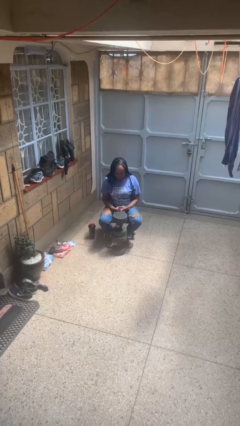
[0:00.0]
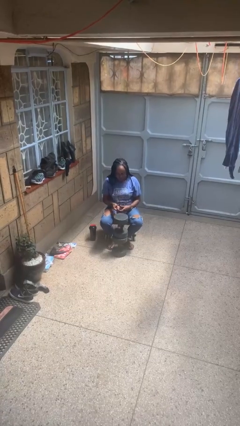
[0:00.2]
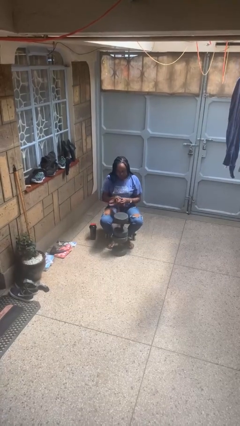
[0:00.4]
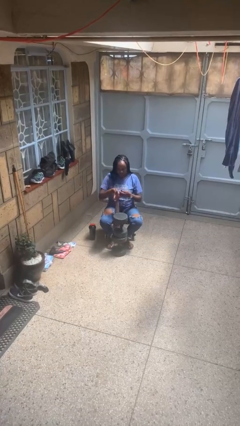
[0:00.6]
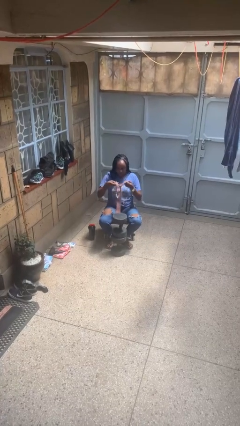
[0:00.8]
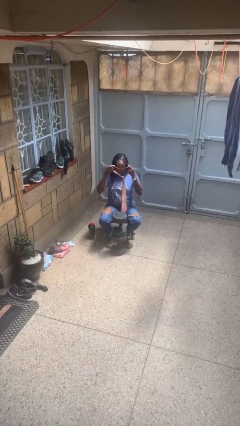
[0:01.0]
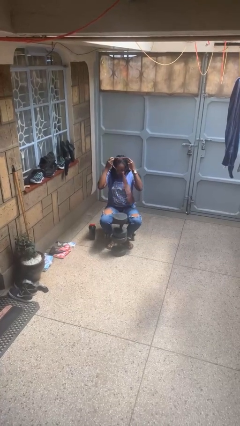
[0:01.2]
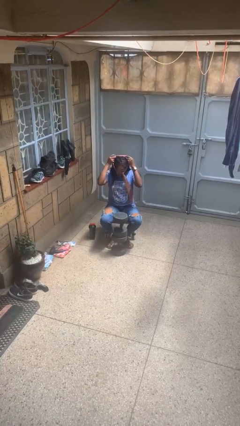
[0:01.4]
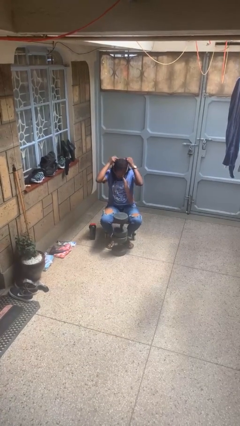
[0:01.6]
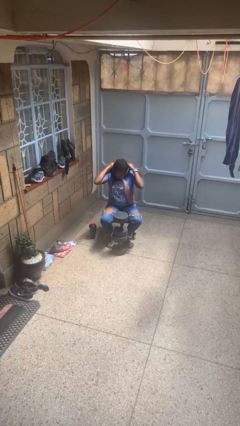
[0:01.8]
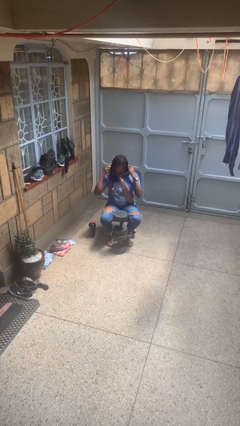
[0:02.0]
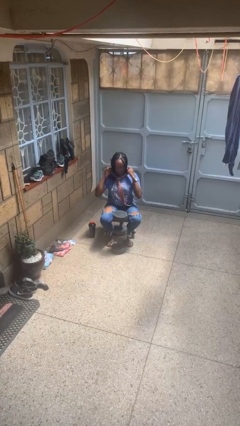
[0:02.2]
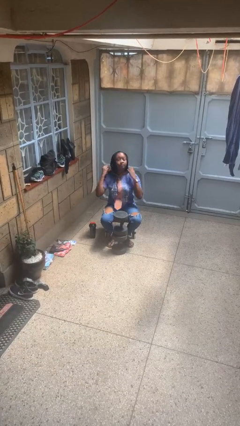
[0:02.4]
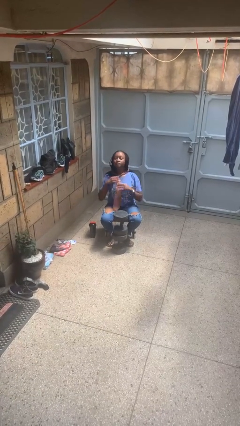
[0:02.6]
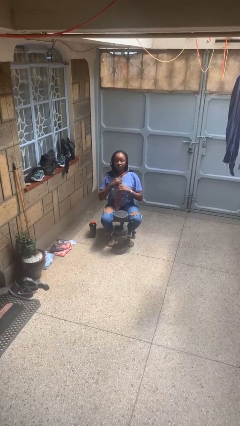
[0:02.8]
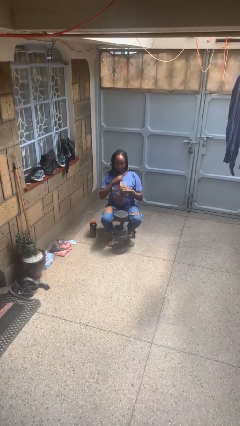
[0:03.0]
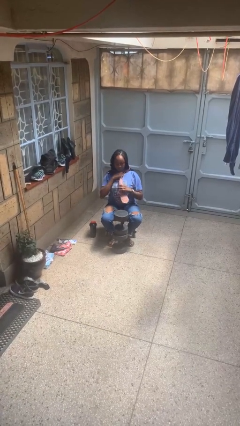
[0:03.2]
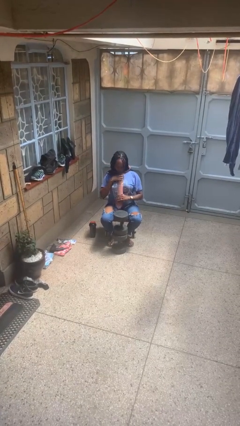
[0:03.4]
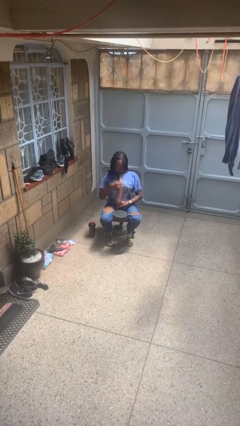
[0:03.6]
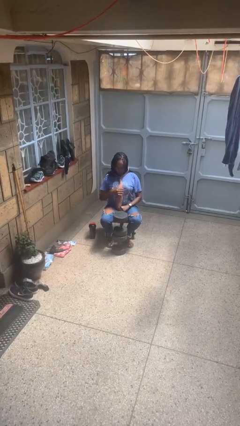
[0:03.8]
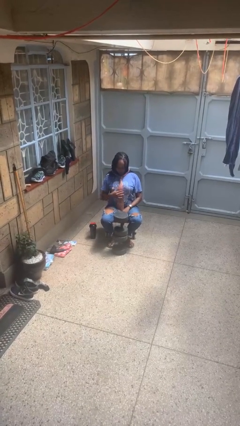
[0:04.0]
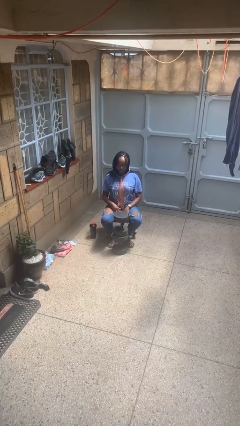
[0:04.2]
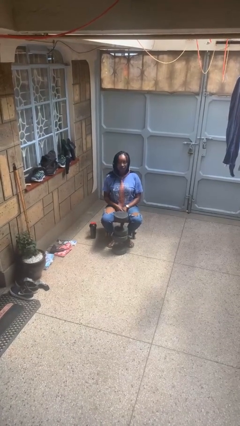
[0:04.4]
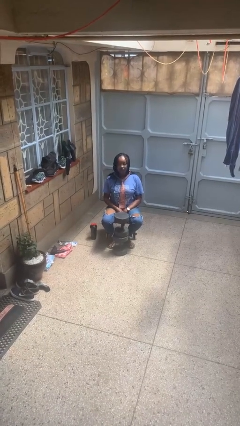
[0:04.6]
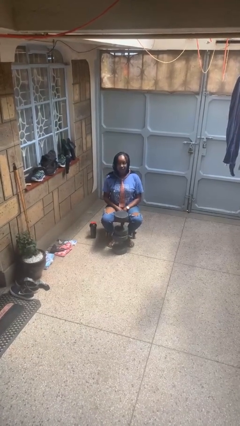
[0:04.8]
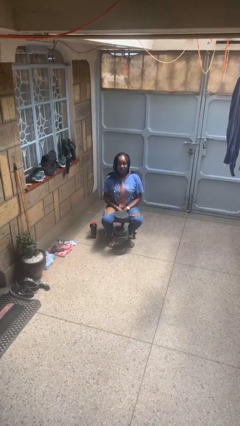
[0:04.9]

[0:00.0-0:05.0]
person puts on necktie

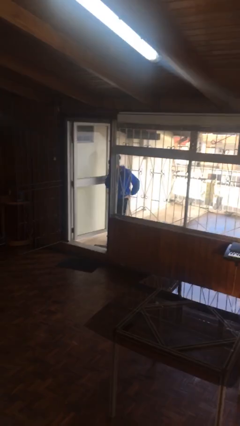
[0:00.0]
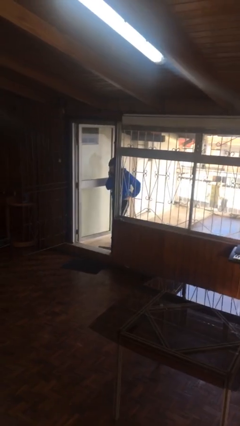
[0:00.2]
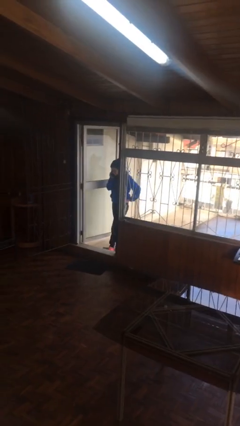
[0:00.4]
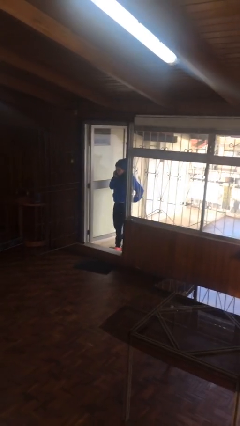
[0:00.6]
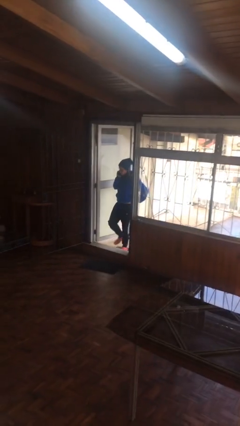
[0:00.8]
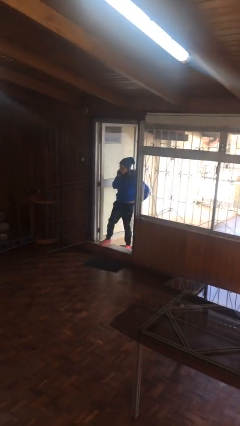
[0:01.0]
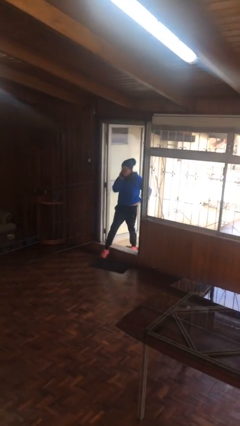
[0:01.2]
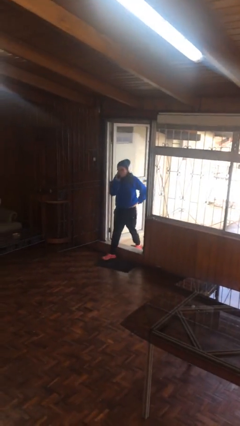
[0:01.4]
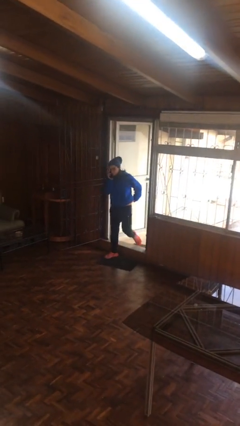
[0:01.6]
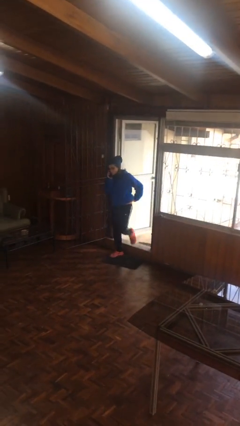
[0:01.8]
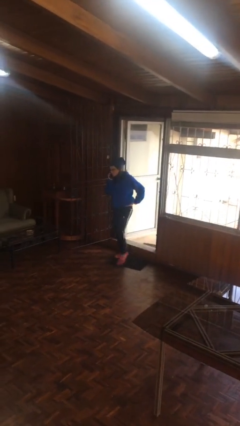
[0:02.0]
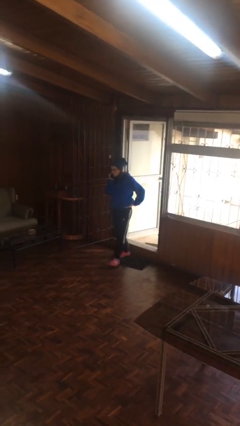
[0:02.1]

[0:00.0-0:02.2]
person enters scene through structure

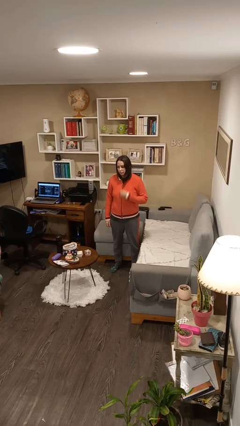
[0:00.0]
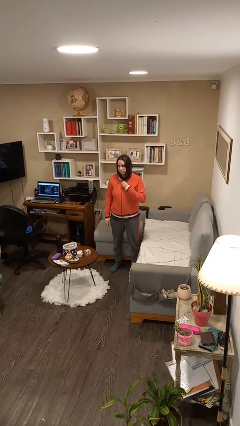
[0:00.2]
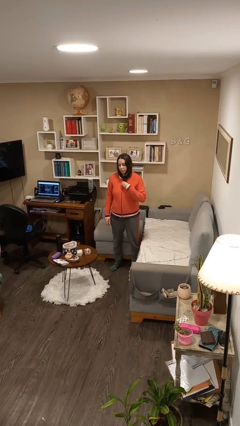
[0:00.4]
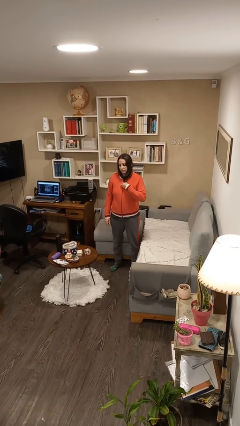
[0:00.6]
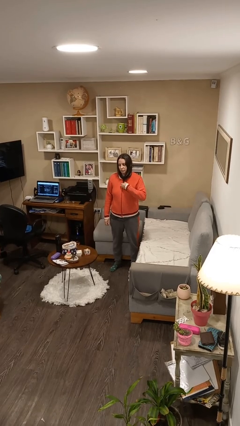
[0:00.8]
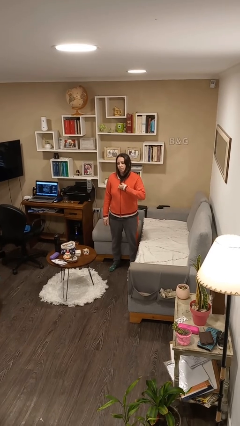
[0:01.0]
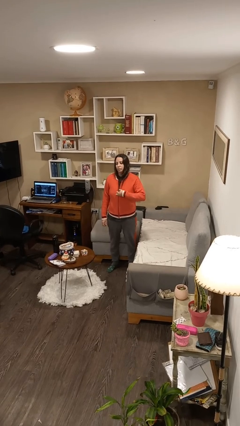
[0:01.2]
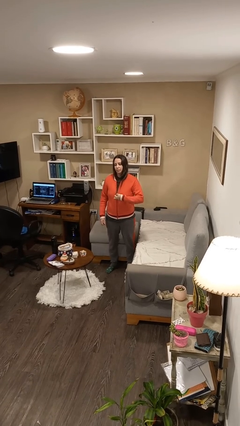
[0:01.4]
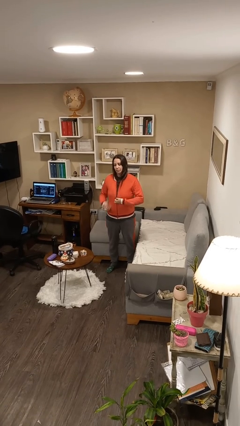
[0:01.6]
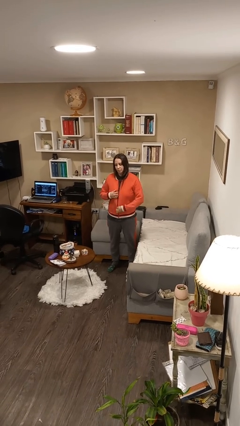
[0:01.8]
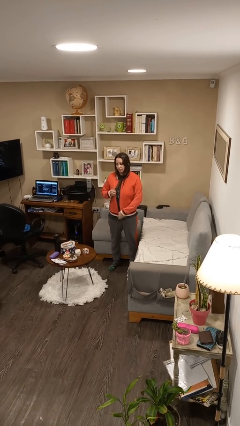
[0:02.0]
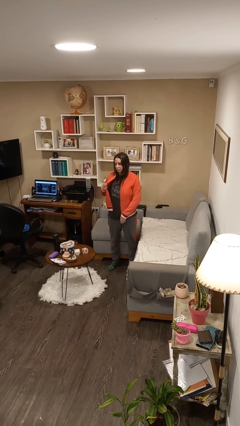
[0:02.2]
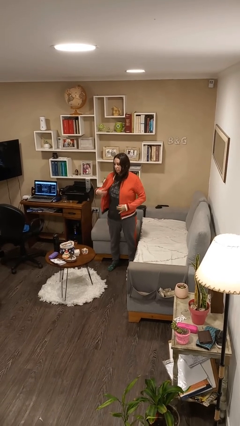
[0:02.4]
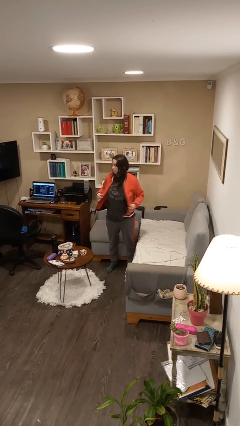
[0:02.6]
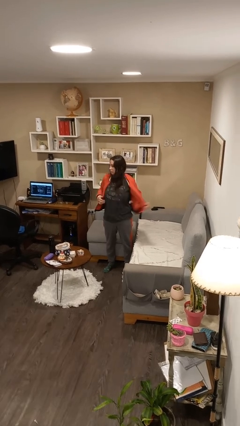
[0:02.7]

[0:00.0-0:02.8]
person unzips jacket

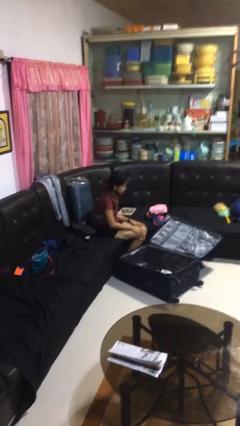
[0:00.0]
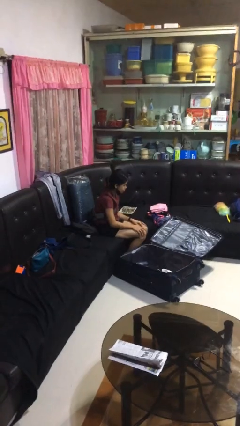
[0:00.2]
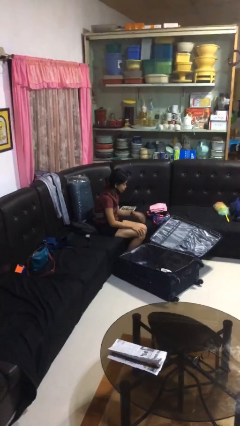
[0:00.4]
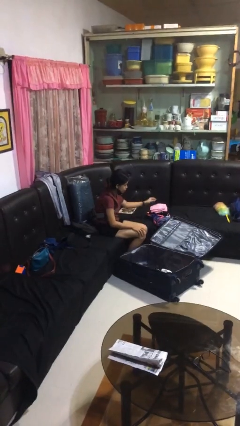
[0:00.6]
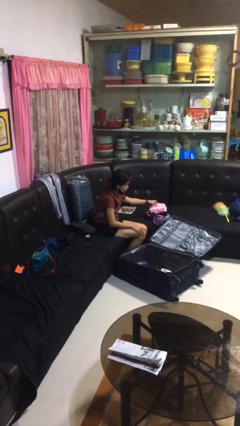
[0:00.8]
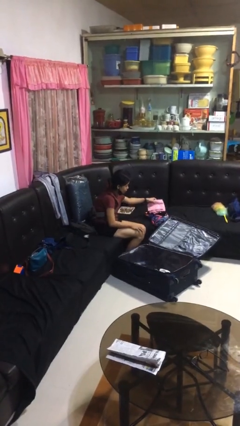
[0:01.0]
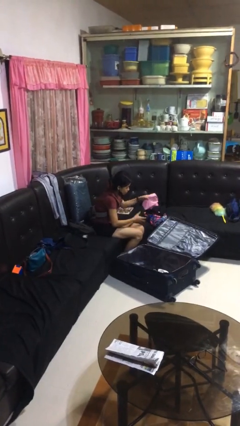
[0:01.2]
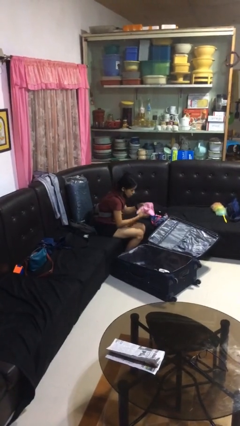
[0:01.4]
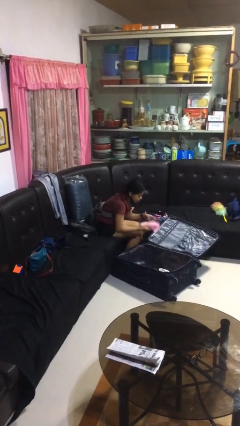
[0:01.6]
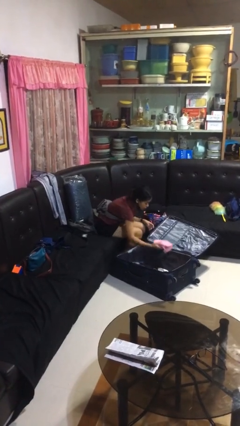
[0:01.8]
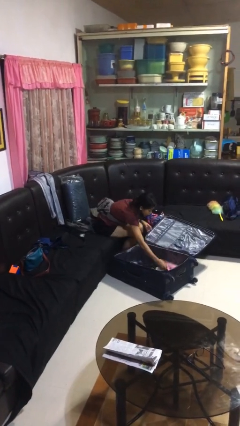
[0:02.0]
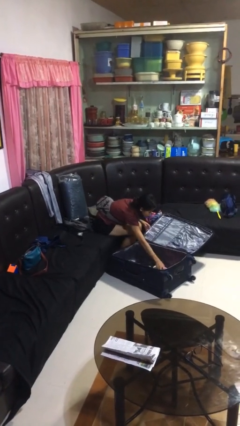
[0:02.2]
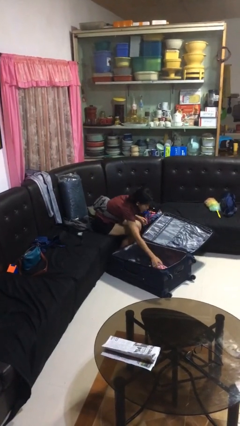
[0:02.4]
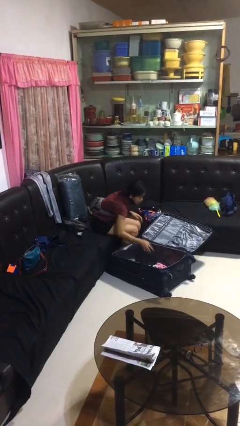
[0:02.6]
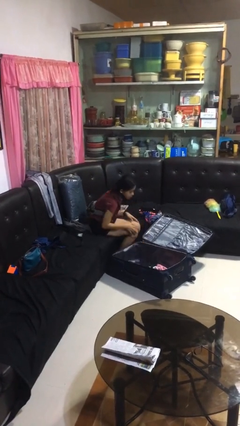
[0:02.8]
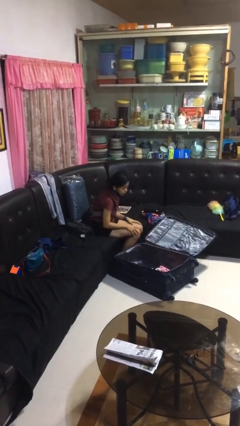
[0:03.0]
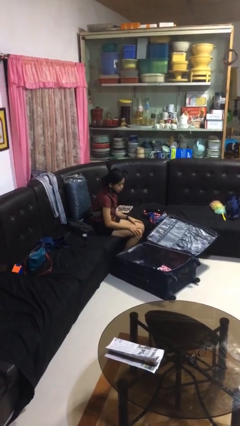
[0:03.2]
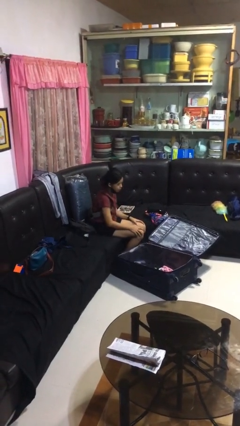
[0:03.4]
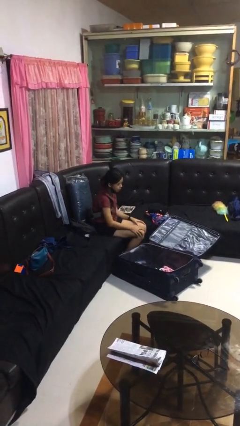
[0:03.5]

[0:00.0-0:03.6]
person loads clothes into suitcase

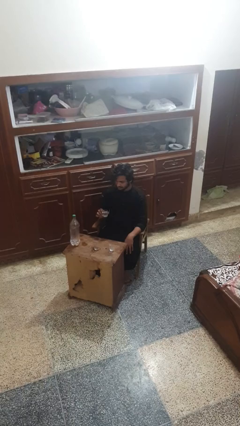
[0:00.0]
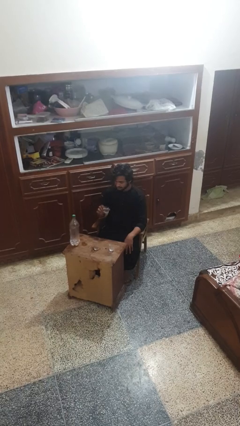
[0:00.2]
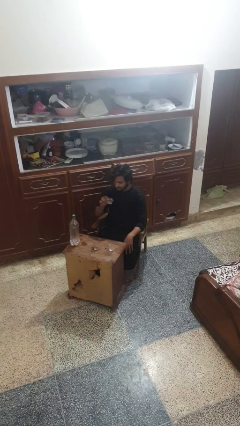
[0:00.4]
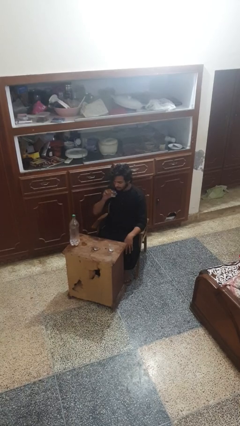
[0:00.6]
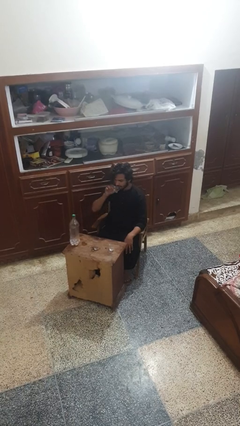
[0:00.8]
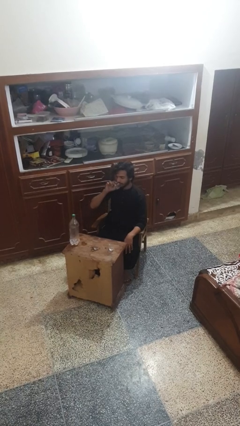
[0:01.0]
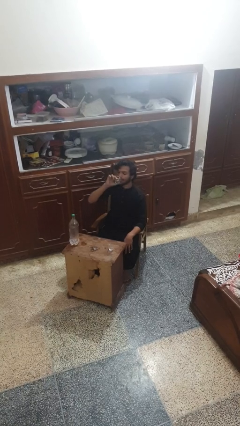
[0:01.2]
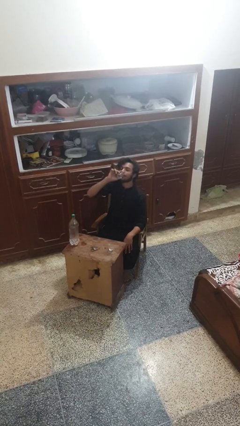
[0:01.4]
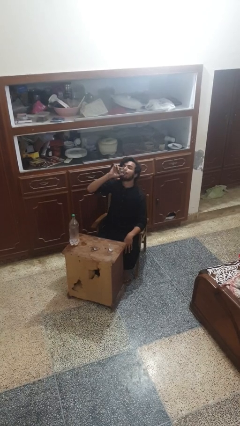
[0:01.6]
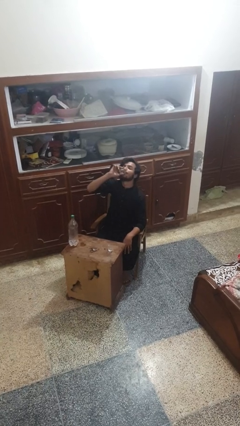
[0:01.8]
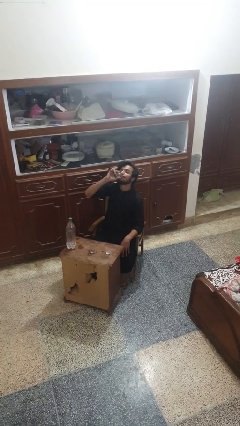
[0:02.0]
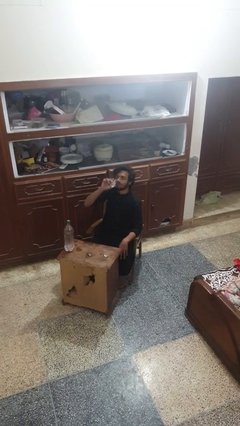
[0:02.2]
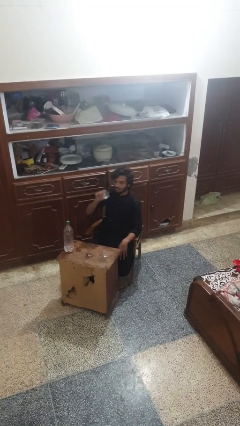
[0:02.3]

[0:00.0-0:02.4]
person drinks from shotglass

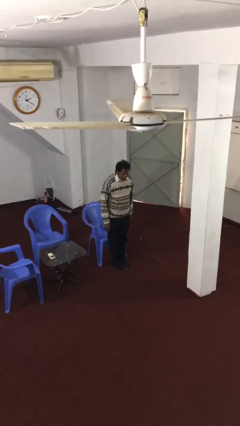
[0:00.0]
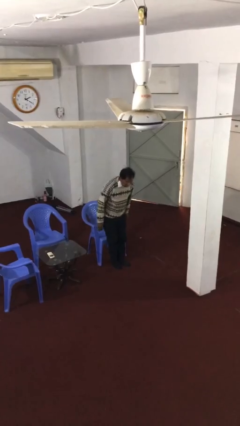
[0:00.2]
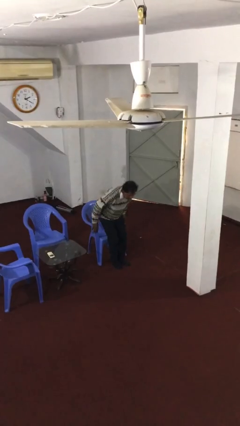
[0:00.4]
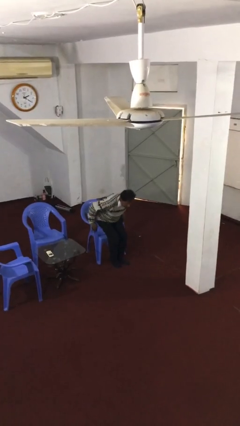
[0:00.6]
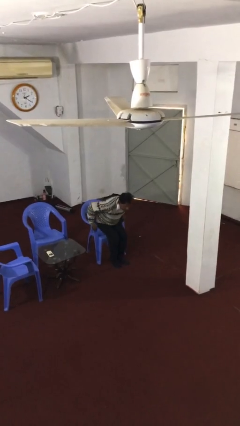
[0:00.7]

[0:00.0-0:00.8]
person sits down

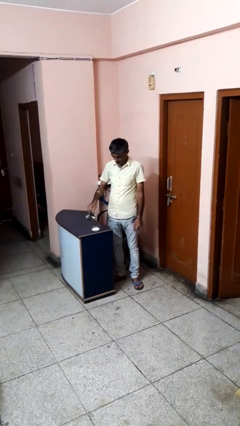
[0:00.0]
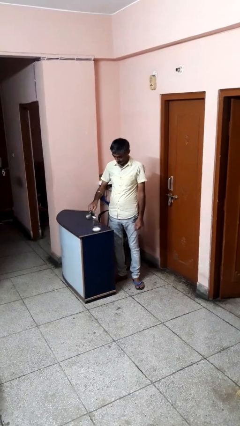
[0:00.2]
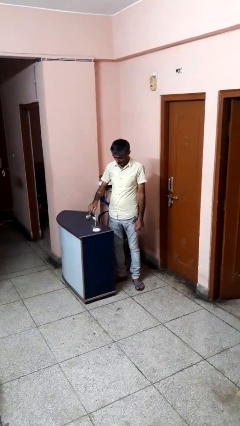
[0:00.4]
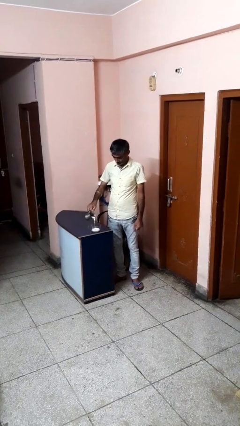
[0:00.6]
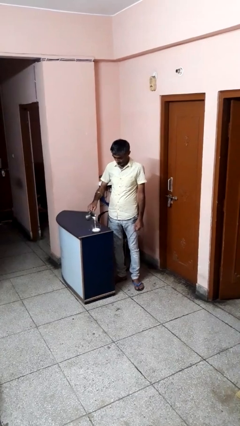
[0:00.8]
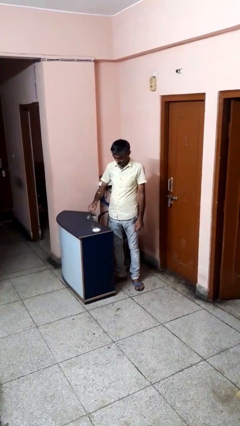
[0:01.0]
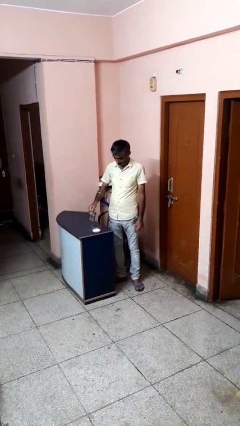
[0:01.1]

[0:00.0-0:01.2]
person pours into bowl
